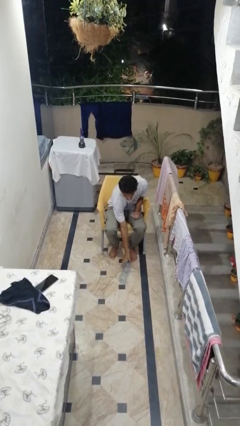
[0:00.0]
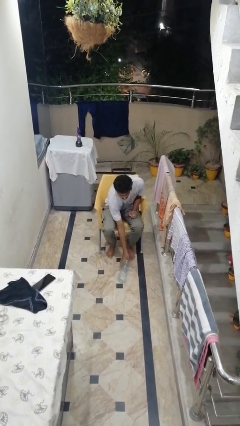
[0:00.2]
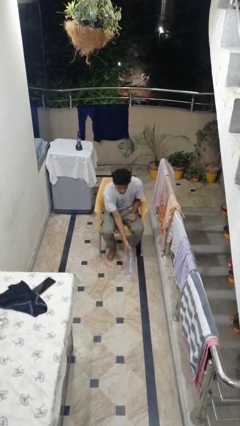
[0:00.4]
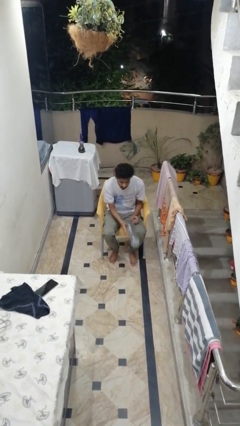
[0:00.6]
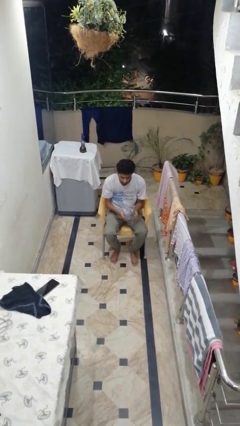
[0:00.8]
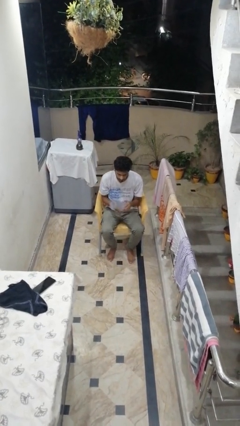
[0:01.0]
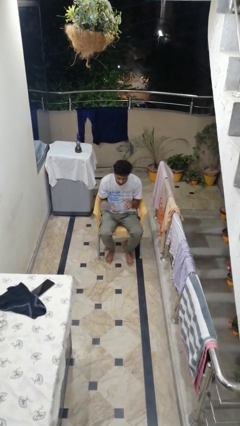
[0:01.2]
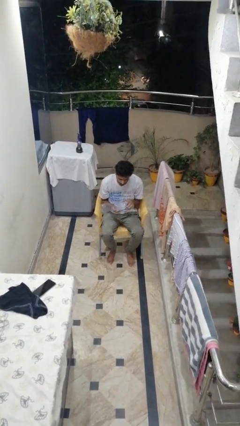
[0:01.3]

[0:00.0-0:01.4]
person picks up object from floor

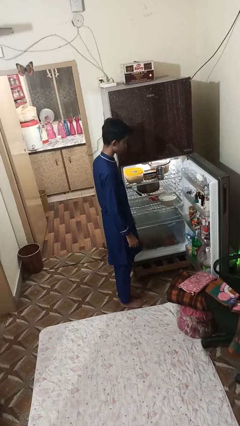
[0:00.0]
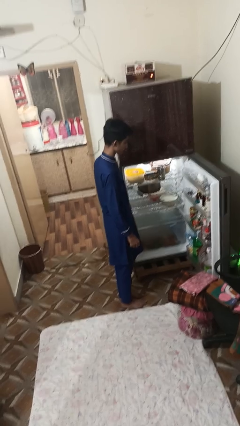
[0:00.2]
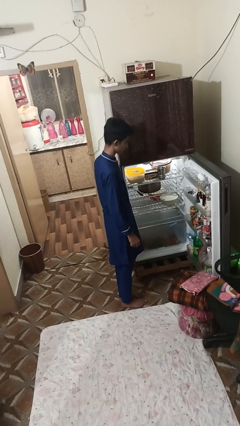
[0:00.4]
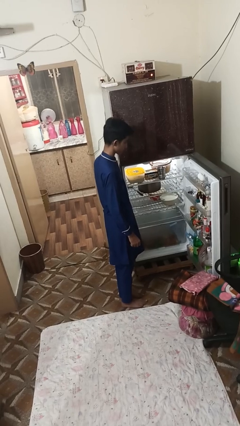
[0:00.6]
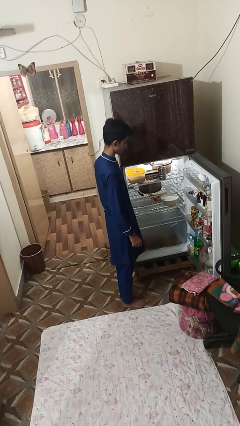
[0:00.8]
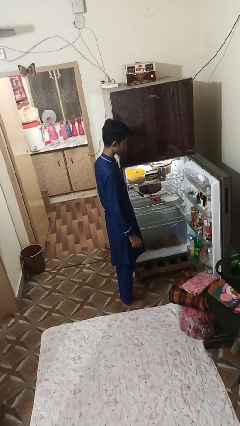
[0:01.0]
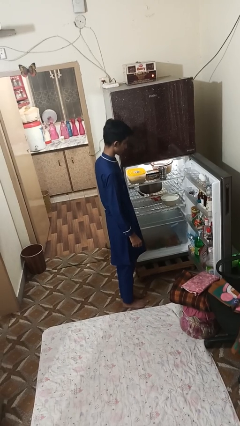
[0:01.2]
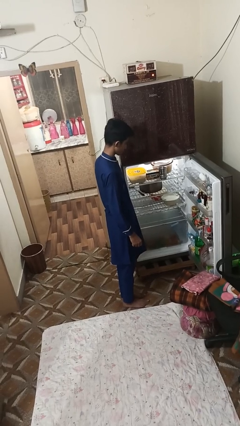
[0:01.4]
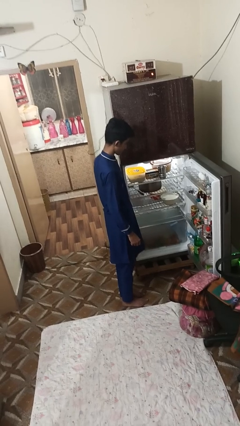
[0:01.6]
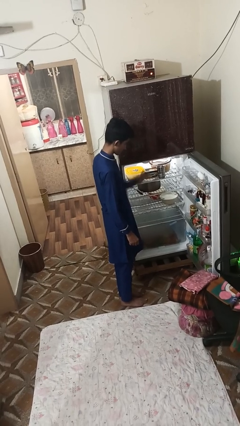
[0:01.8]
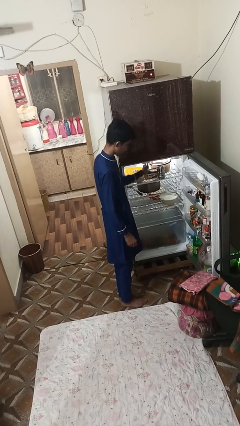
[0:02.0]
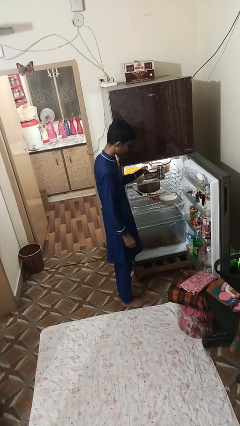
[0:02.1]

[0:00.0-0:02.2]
person takes object from refrigerator

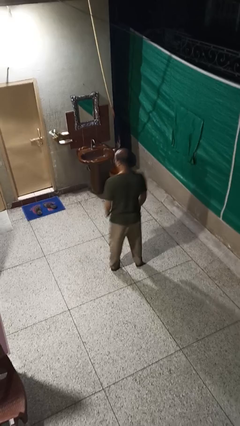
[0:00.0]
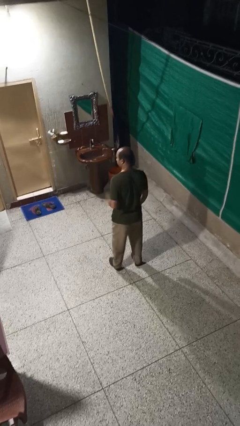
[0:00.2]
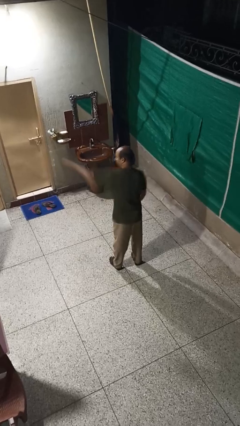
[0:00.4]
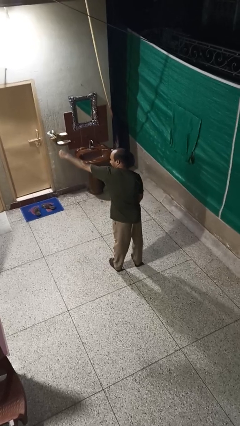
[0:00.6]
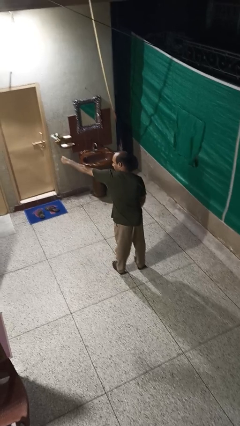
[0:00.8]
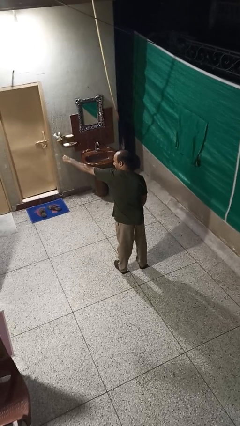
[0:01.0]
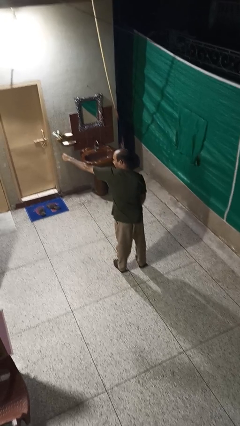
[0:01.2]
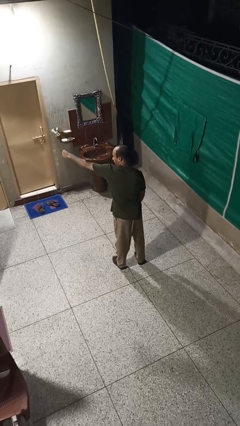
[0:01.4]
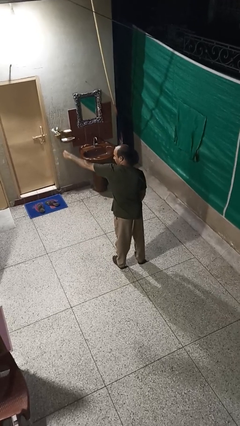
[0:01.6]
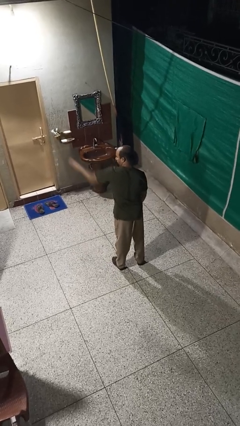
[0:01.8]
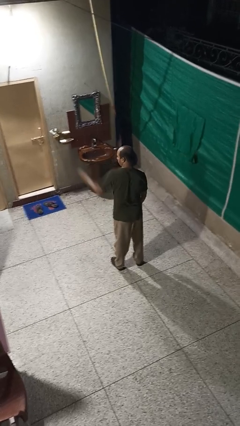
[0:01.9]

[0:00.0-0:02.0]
person punches

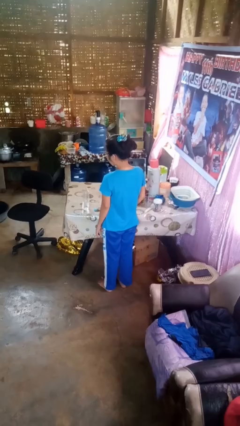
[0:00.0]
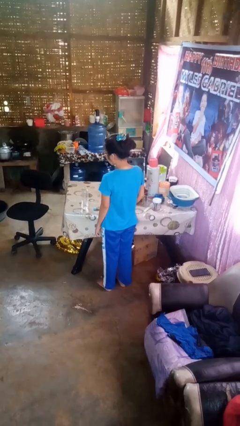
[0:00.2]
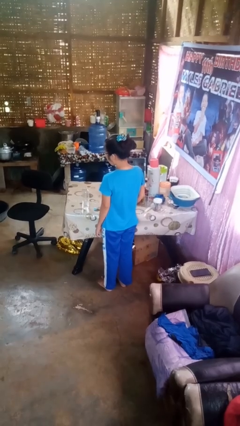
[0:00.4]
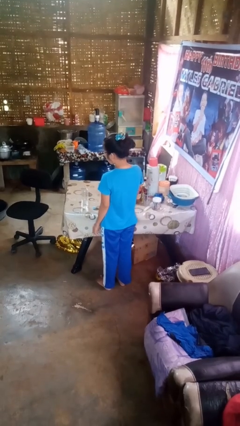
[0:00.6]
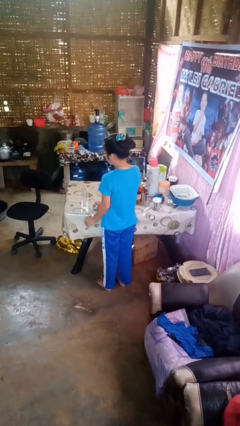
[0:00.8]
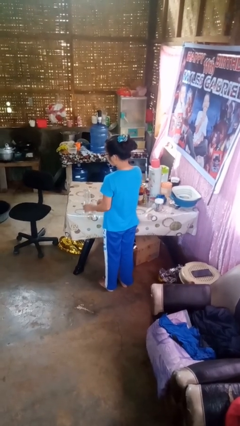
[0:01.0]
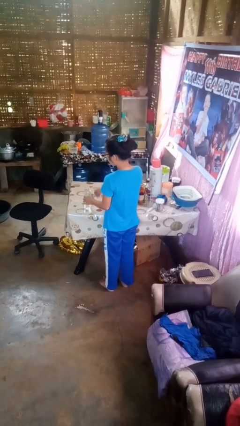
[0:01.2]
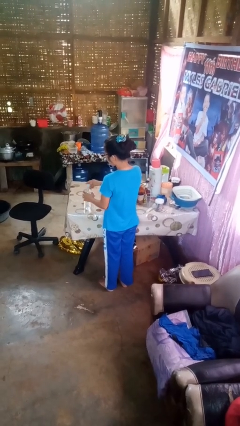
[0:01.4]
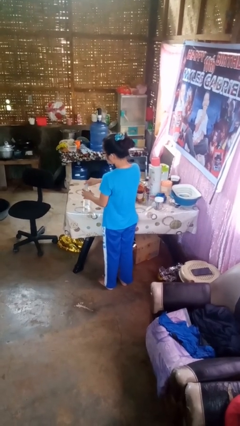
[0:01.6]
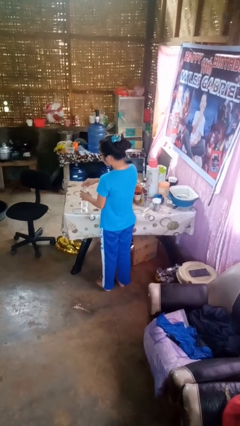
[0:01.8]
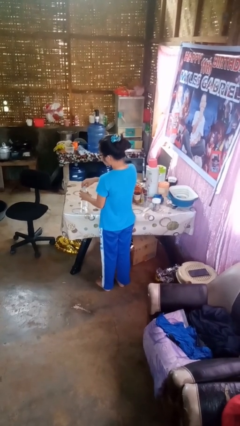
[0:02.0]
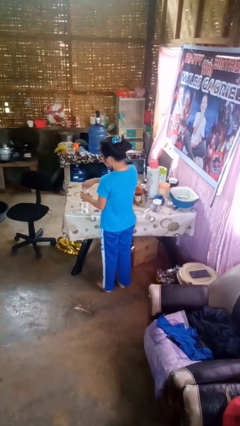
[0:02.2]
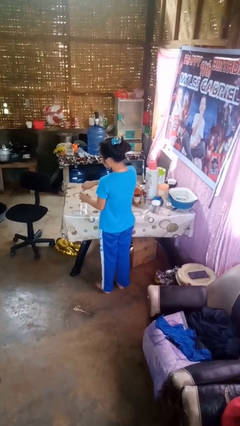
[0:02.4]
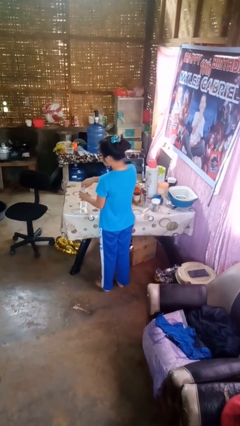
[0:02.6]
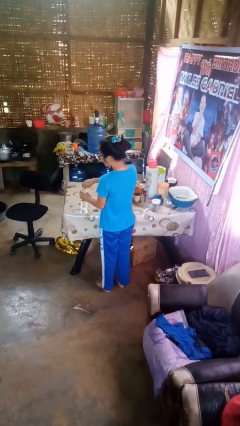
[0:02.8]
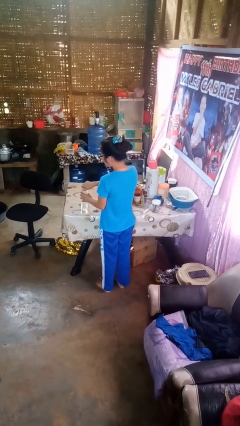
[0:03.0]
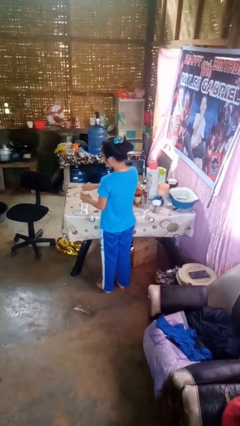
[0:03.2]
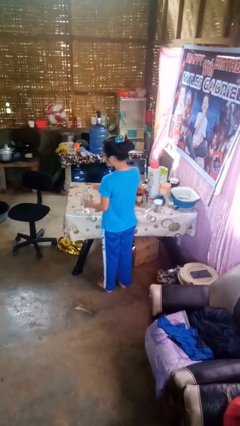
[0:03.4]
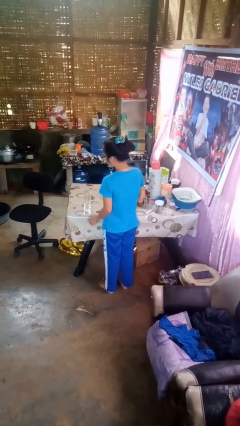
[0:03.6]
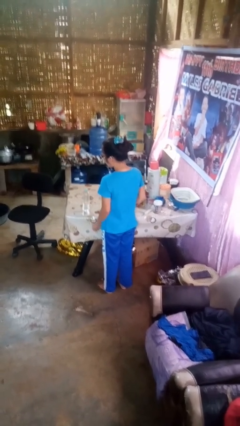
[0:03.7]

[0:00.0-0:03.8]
person screws lid to bottle

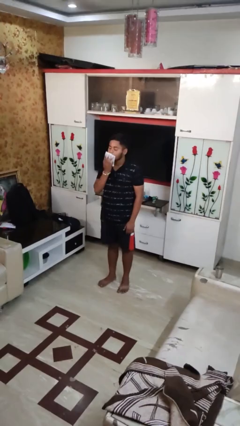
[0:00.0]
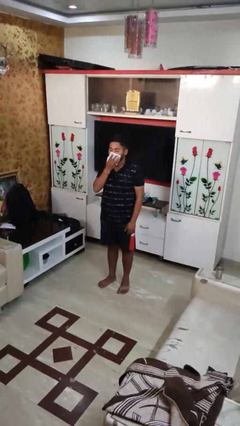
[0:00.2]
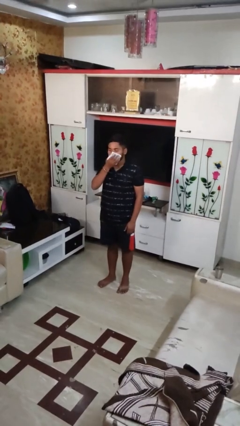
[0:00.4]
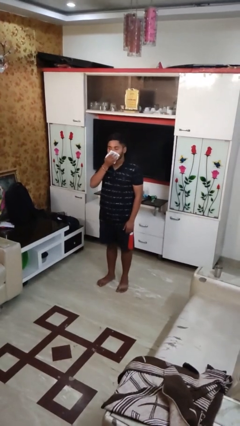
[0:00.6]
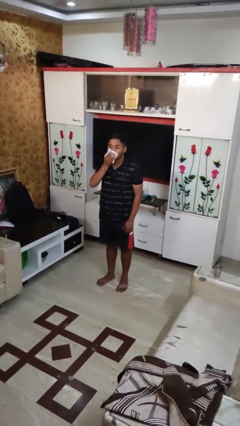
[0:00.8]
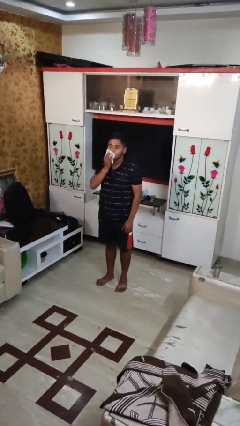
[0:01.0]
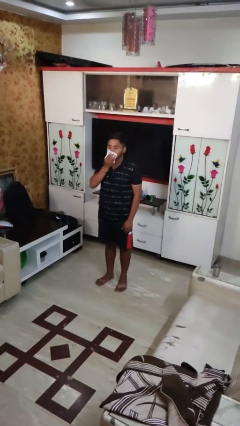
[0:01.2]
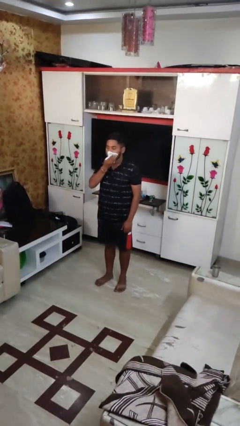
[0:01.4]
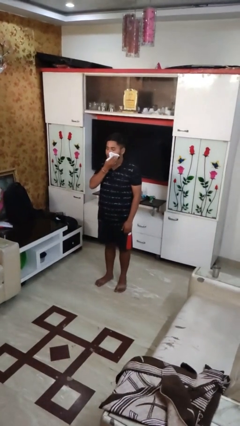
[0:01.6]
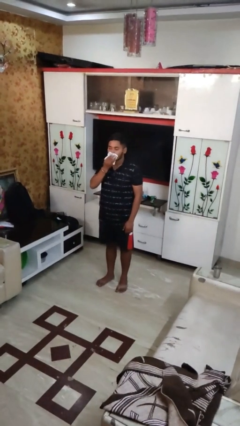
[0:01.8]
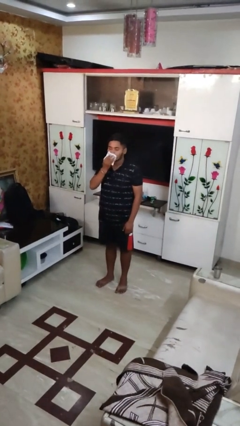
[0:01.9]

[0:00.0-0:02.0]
person wipes mouth with napkin

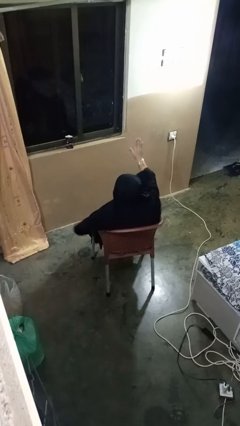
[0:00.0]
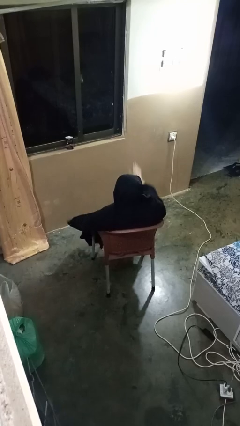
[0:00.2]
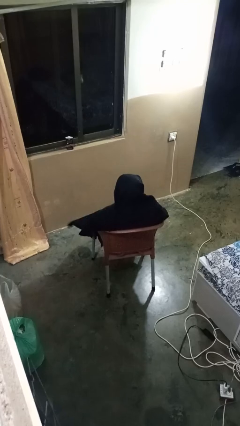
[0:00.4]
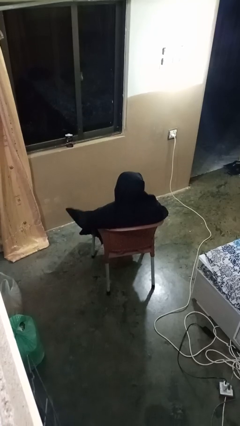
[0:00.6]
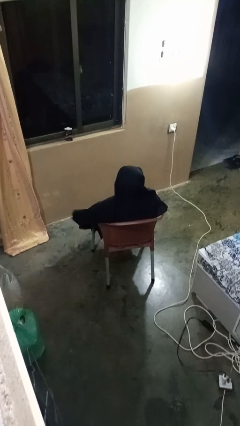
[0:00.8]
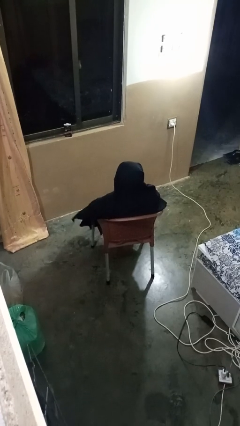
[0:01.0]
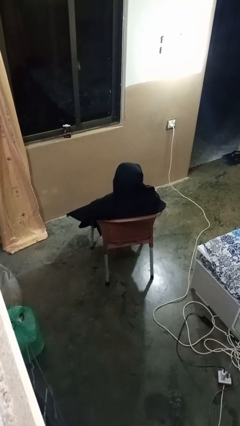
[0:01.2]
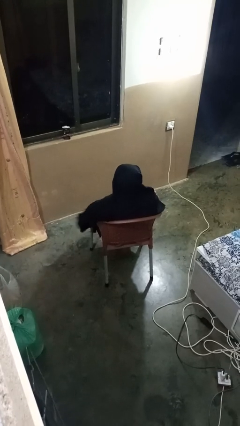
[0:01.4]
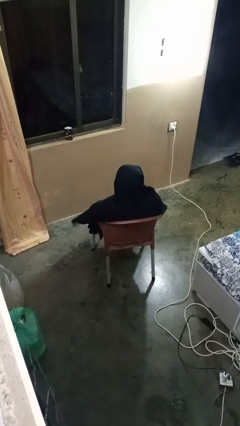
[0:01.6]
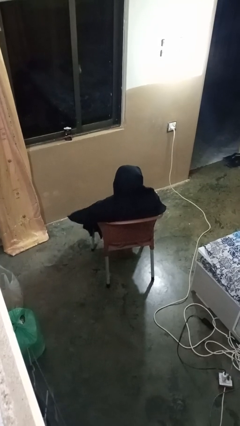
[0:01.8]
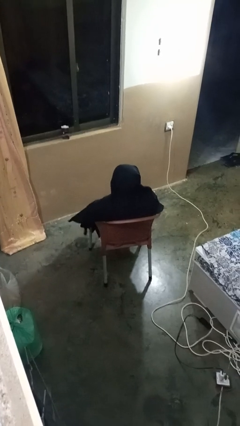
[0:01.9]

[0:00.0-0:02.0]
person gestures lower hand

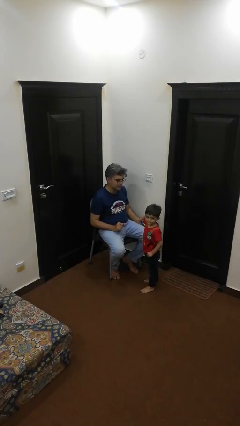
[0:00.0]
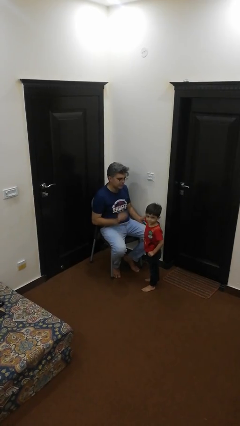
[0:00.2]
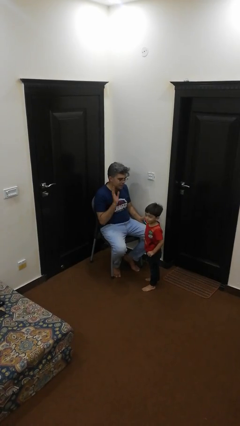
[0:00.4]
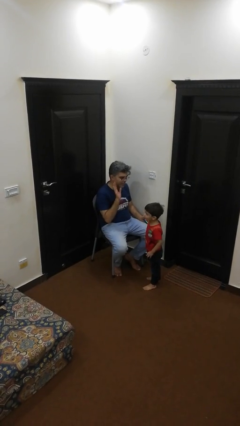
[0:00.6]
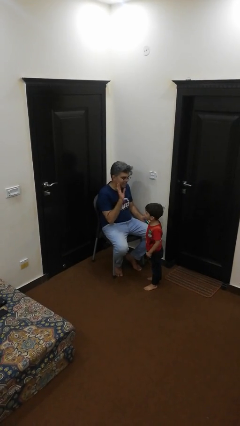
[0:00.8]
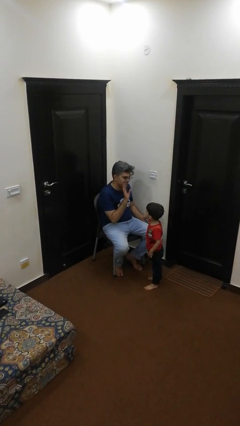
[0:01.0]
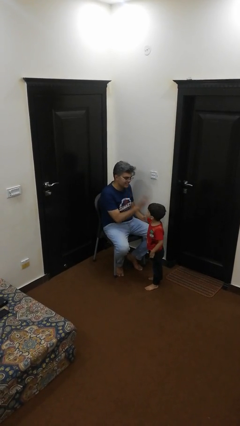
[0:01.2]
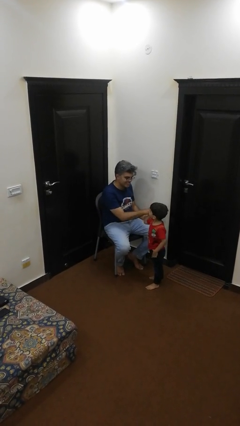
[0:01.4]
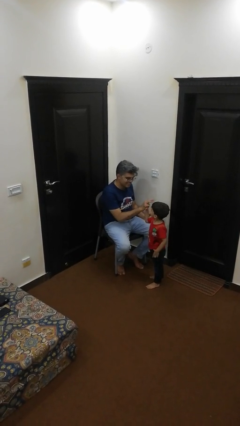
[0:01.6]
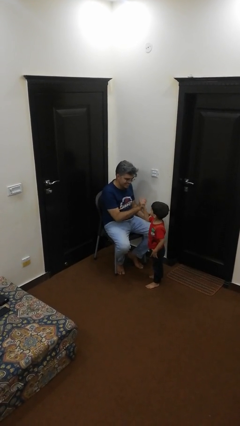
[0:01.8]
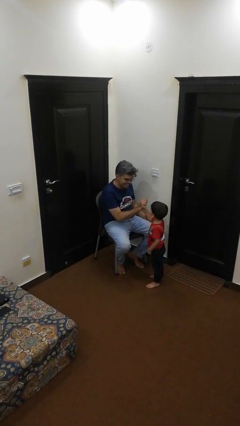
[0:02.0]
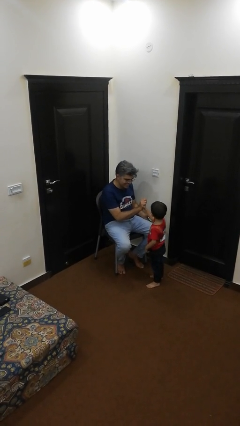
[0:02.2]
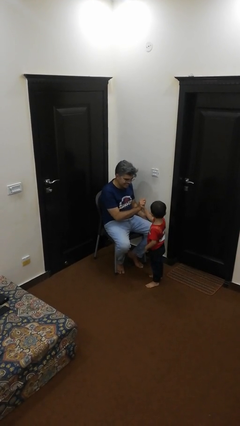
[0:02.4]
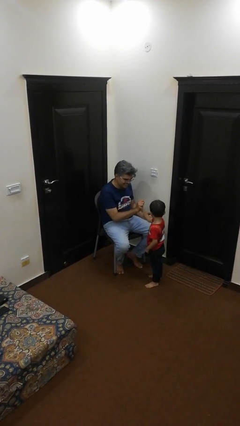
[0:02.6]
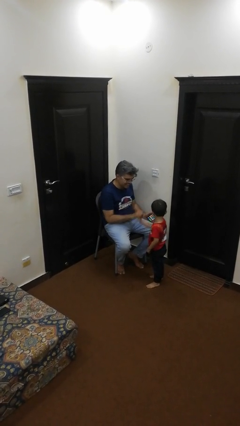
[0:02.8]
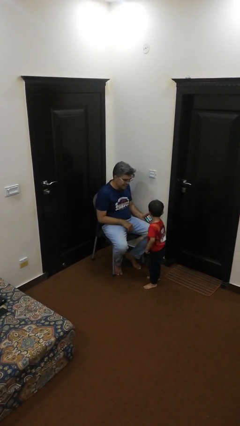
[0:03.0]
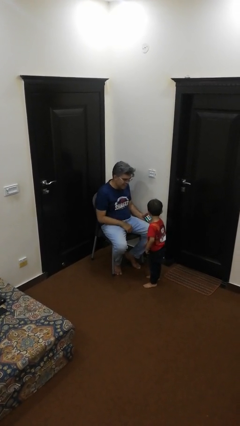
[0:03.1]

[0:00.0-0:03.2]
person highfives hand
